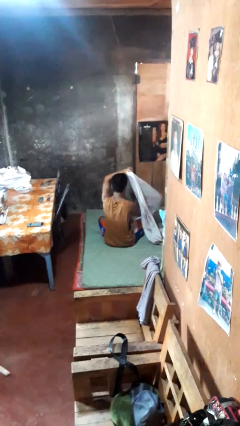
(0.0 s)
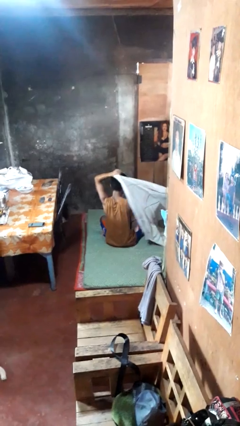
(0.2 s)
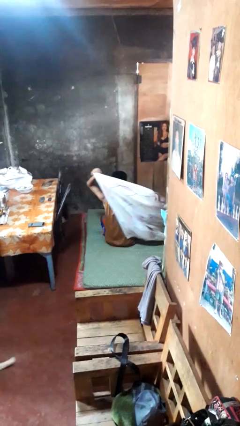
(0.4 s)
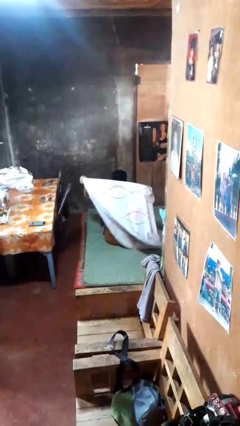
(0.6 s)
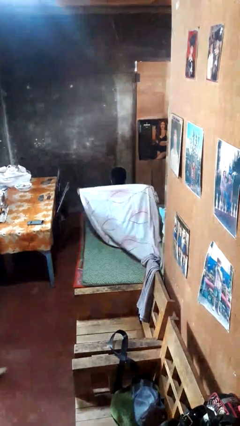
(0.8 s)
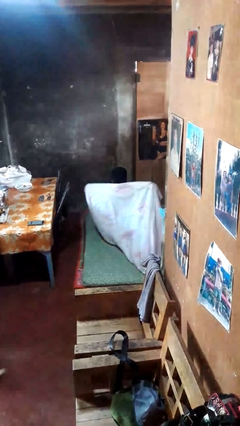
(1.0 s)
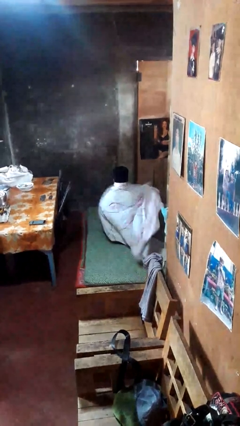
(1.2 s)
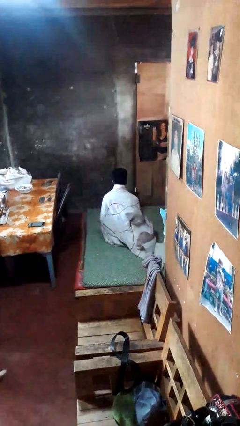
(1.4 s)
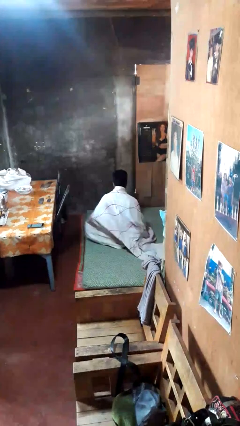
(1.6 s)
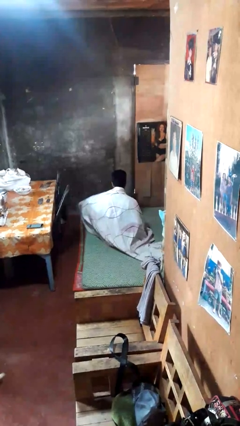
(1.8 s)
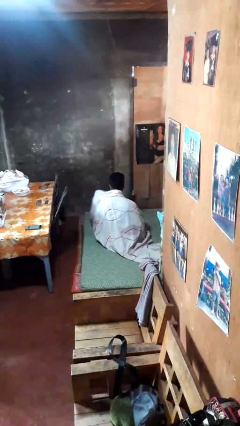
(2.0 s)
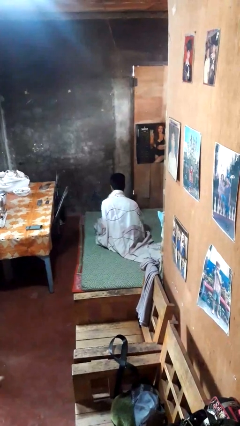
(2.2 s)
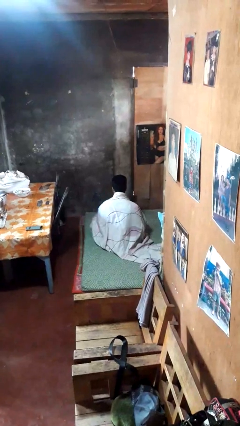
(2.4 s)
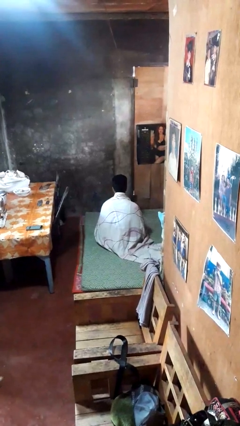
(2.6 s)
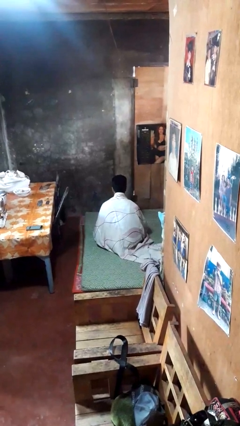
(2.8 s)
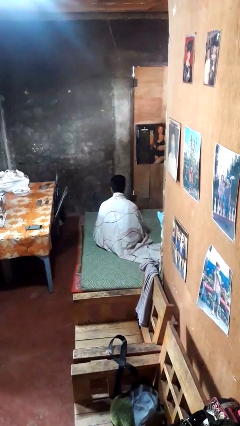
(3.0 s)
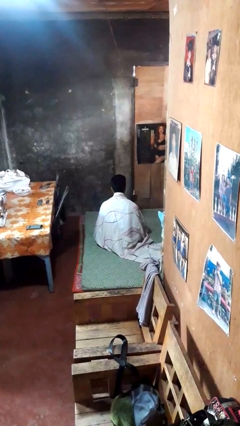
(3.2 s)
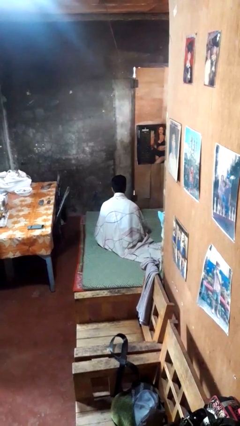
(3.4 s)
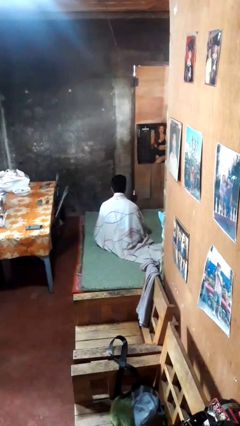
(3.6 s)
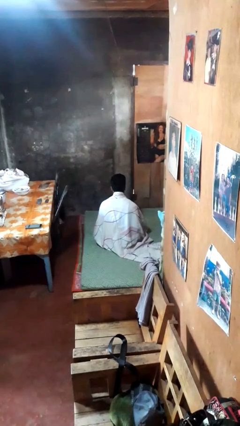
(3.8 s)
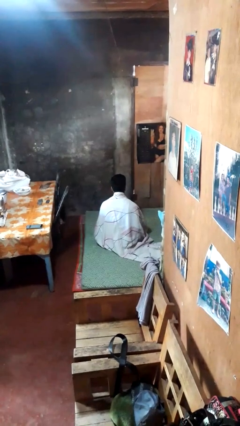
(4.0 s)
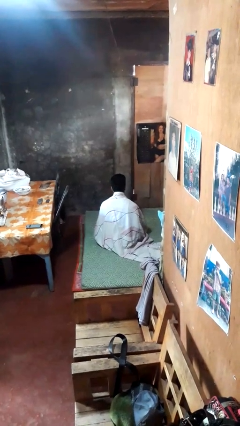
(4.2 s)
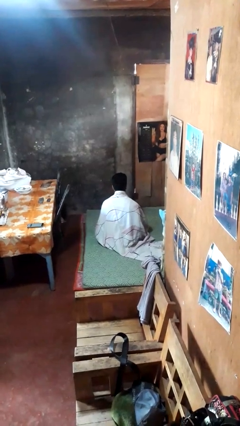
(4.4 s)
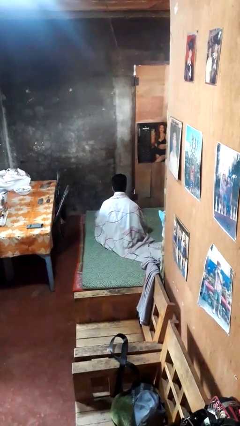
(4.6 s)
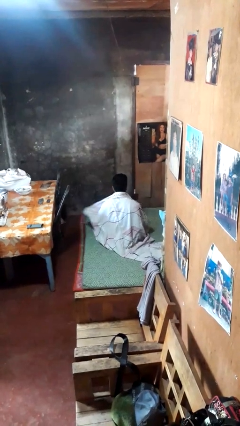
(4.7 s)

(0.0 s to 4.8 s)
person covers with blanket

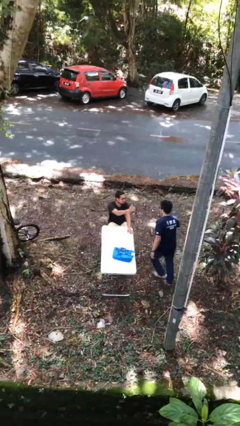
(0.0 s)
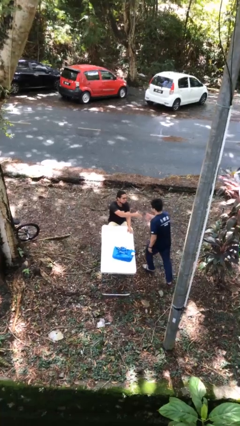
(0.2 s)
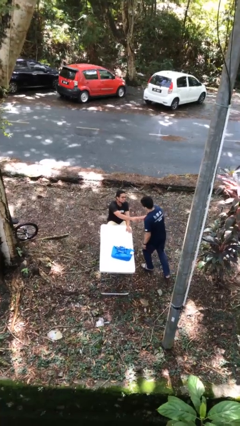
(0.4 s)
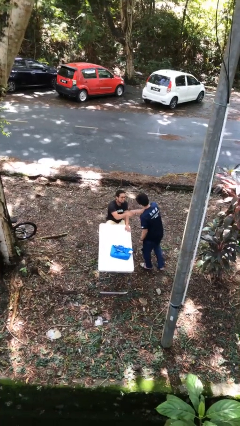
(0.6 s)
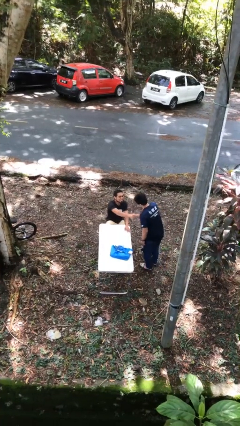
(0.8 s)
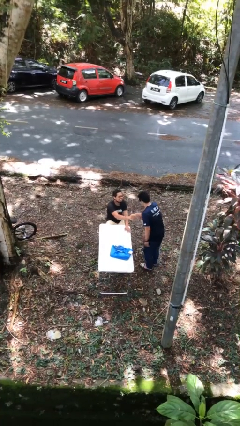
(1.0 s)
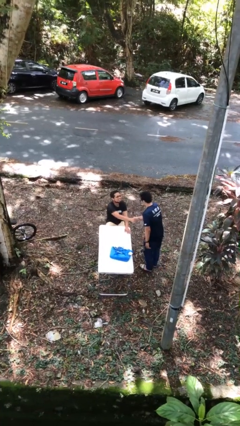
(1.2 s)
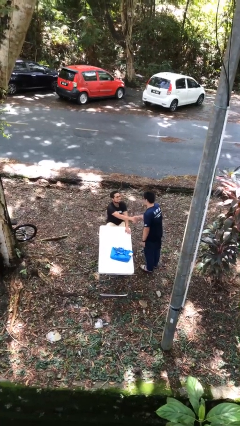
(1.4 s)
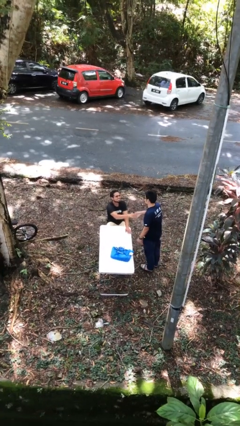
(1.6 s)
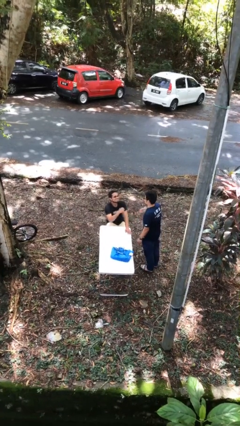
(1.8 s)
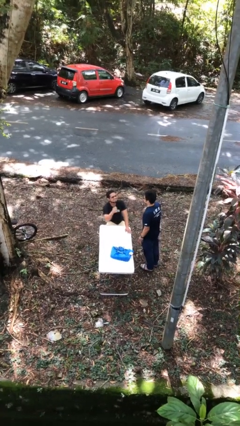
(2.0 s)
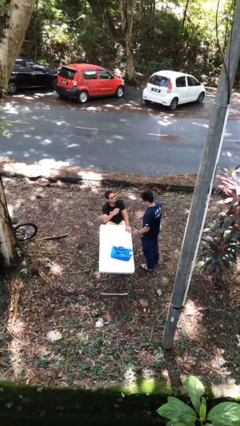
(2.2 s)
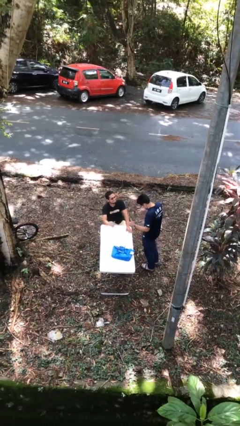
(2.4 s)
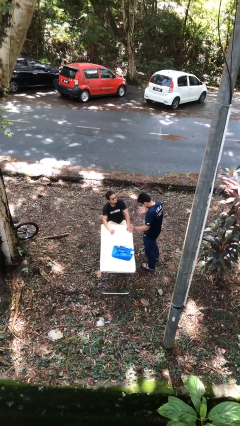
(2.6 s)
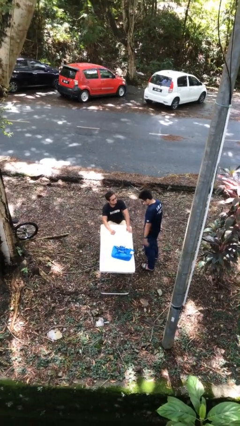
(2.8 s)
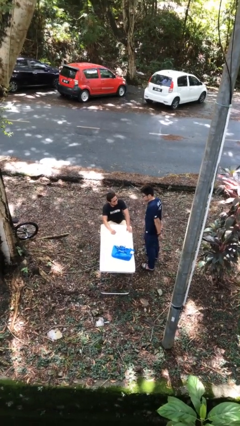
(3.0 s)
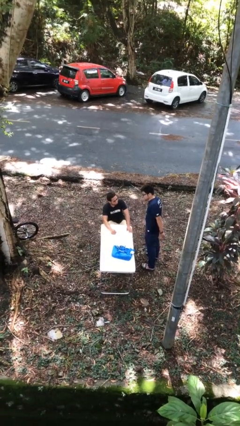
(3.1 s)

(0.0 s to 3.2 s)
person shakes hand

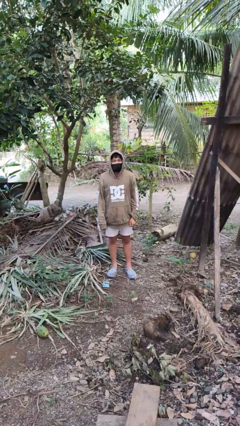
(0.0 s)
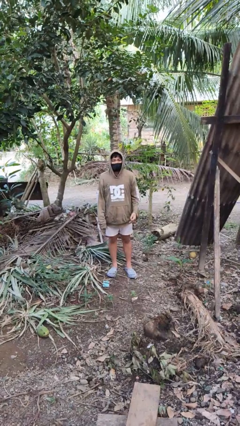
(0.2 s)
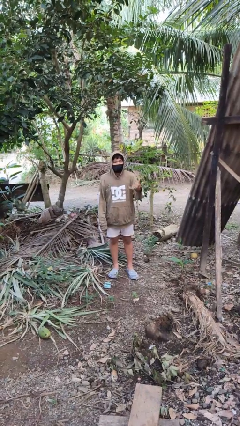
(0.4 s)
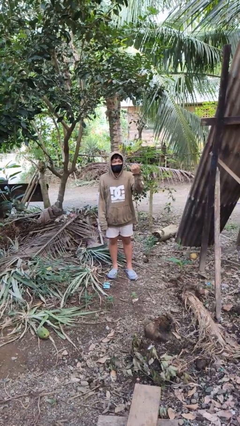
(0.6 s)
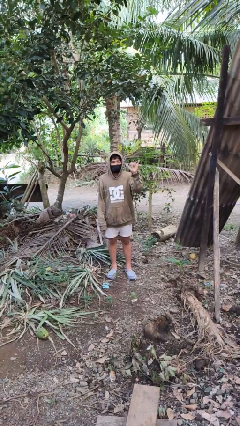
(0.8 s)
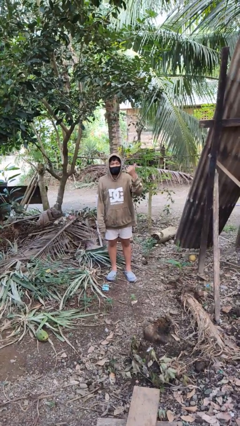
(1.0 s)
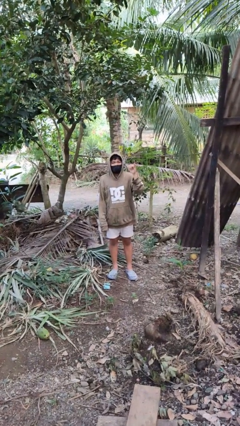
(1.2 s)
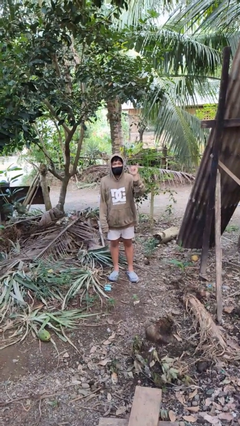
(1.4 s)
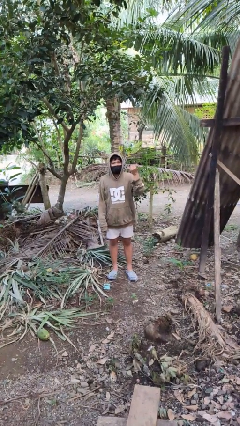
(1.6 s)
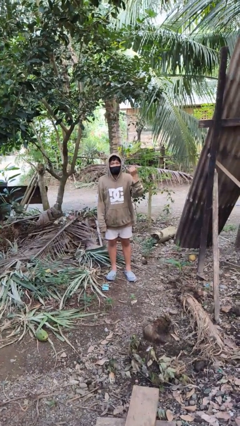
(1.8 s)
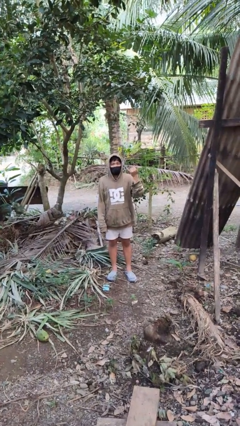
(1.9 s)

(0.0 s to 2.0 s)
person gestures hang loose

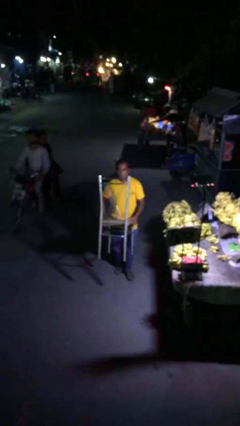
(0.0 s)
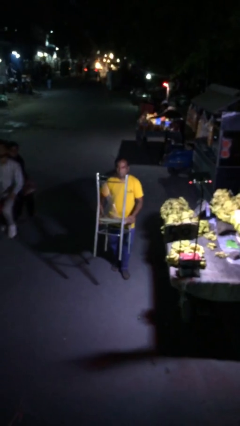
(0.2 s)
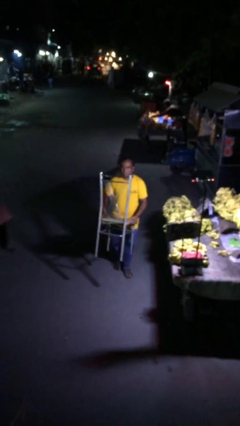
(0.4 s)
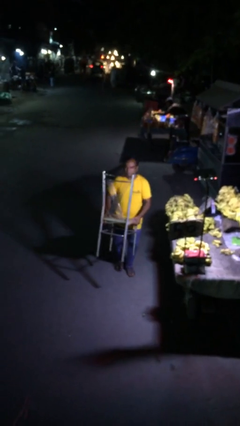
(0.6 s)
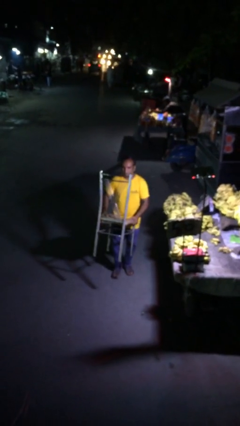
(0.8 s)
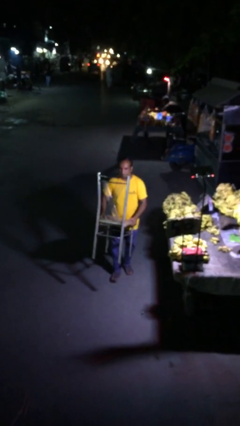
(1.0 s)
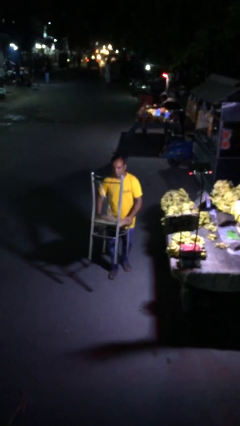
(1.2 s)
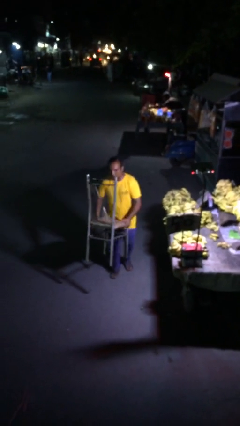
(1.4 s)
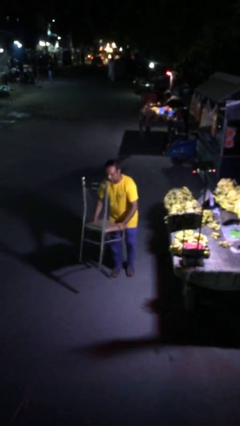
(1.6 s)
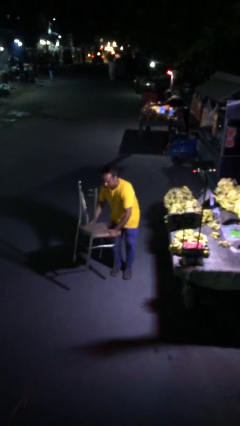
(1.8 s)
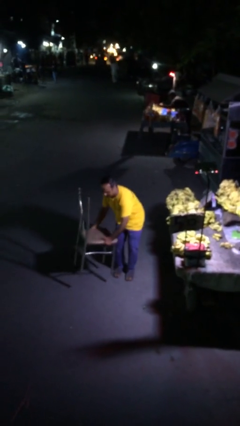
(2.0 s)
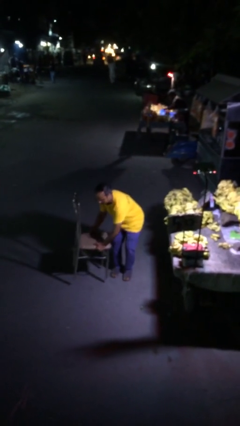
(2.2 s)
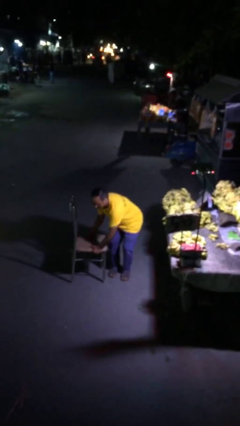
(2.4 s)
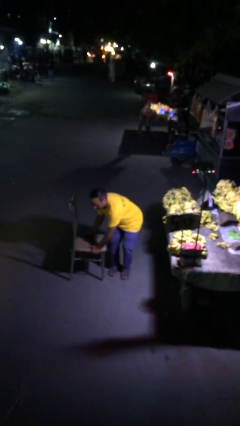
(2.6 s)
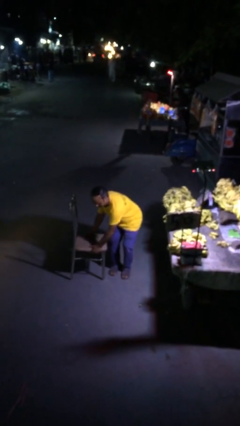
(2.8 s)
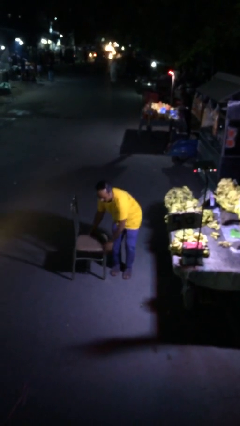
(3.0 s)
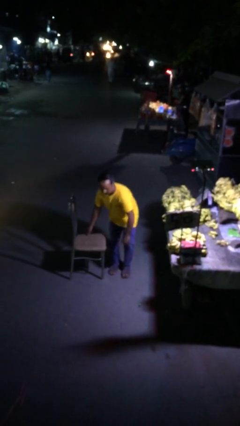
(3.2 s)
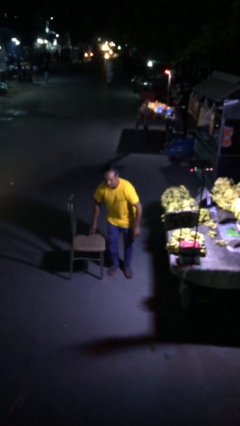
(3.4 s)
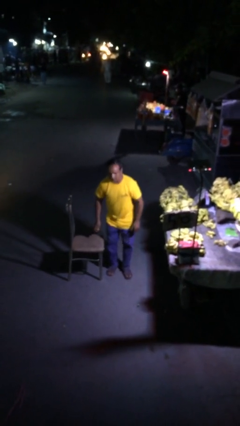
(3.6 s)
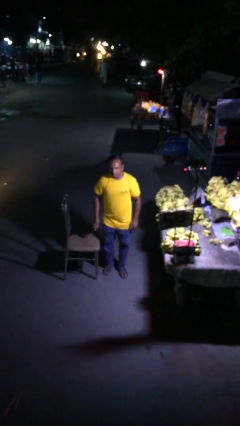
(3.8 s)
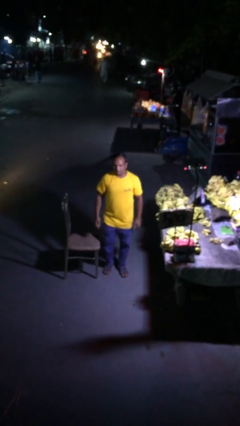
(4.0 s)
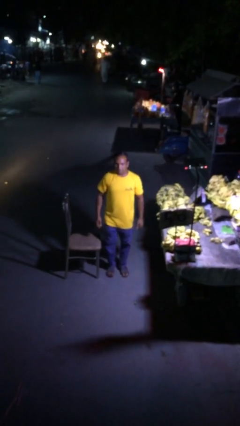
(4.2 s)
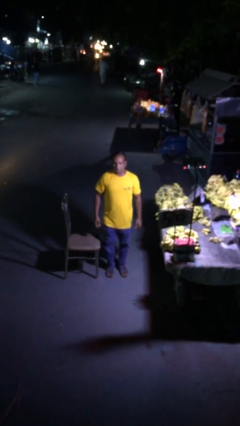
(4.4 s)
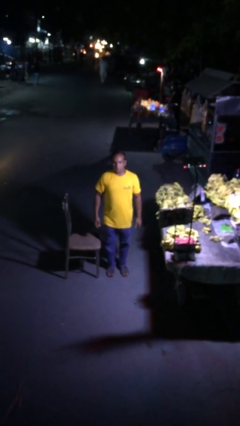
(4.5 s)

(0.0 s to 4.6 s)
person puts down object on floor

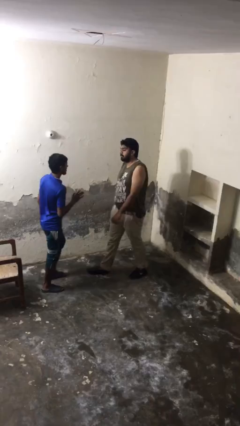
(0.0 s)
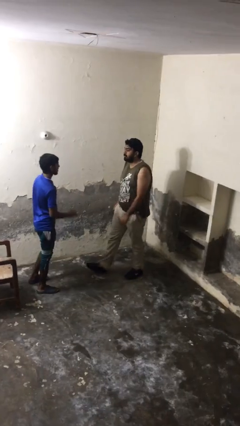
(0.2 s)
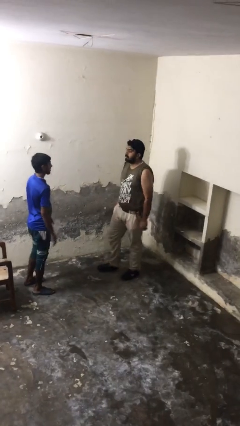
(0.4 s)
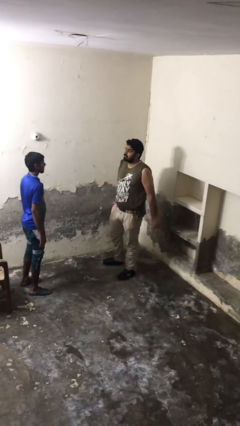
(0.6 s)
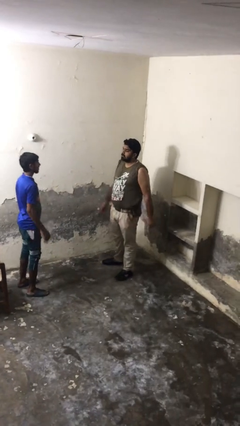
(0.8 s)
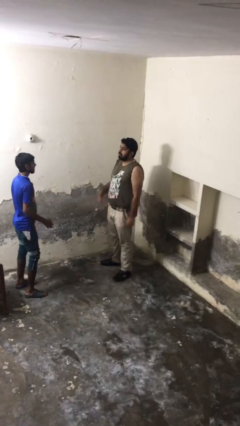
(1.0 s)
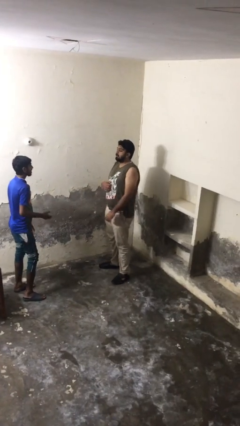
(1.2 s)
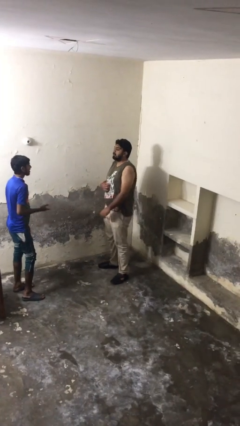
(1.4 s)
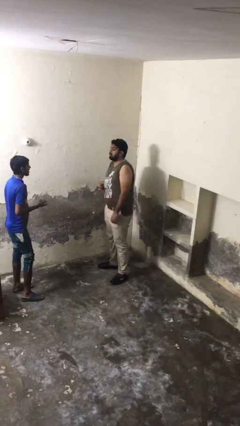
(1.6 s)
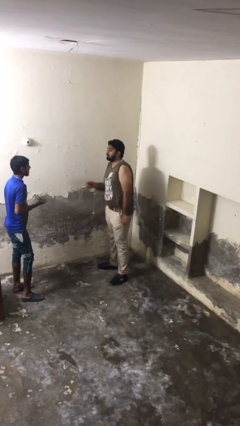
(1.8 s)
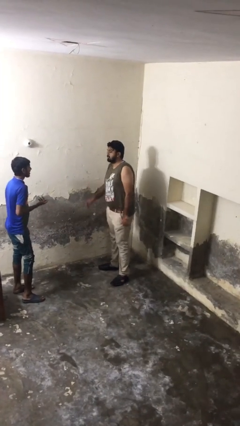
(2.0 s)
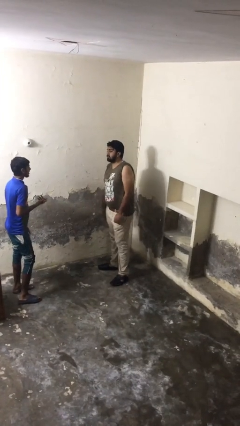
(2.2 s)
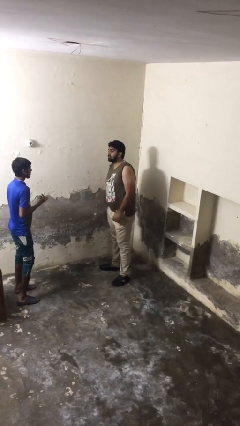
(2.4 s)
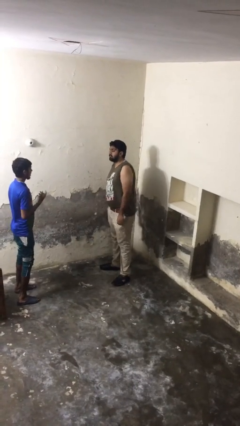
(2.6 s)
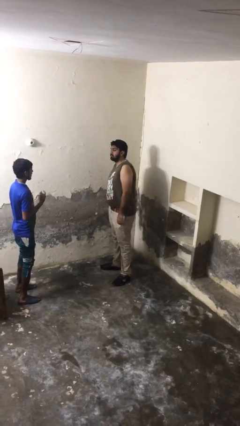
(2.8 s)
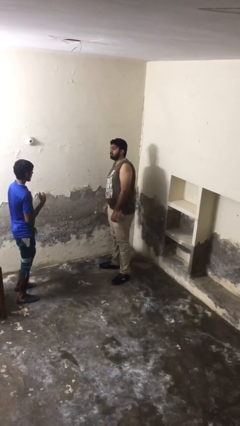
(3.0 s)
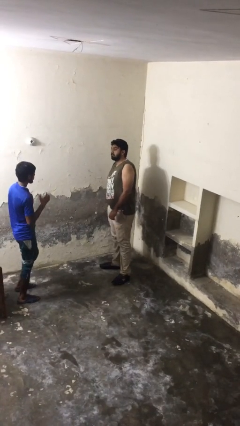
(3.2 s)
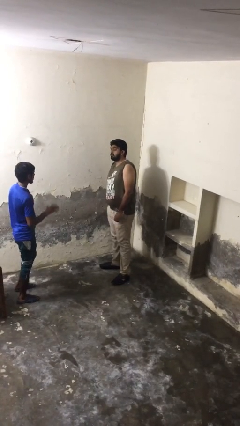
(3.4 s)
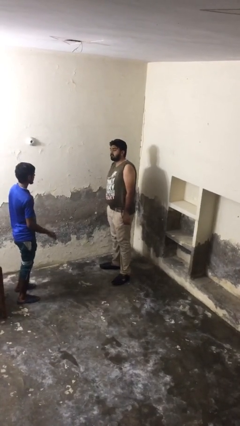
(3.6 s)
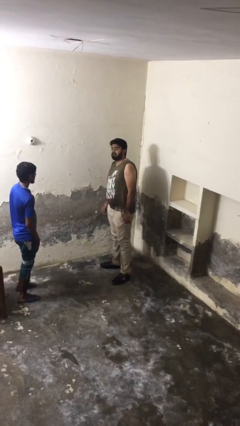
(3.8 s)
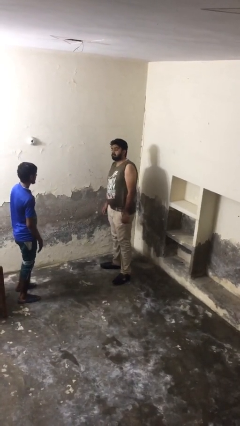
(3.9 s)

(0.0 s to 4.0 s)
person talks to person
